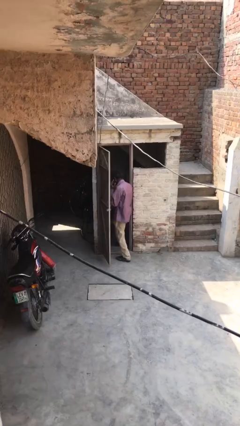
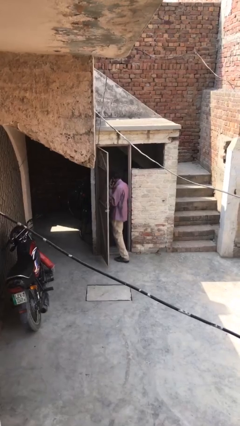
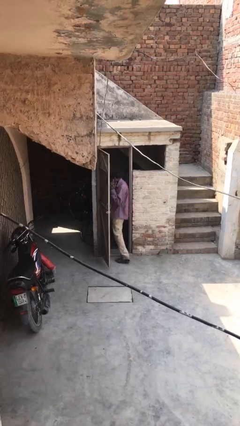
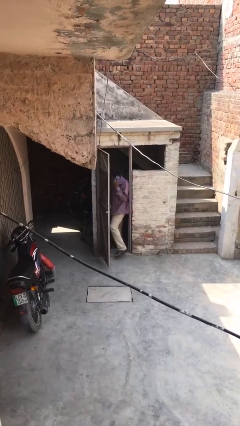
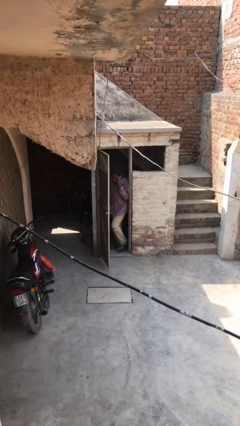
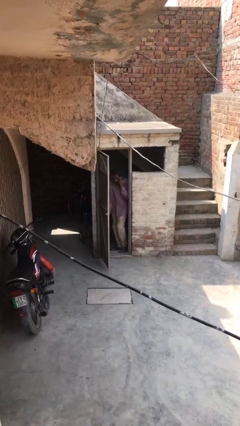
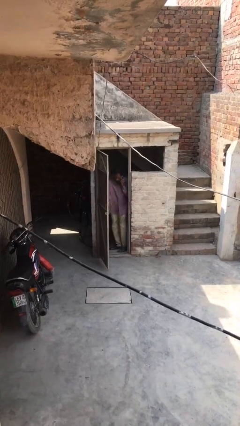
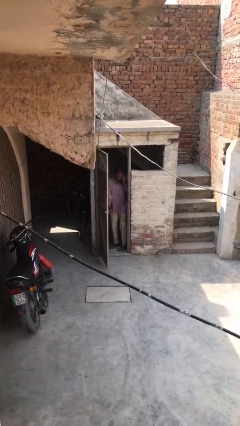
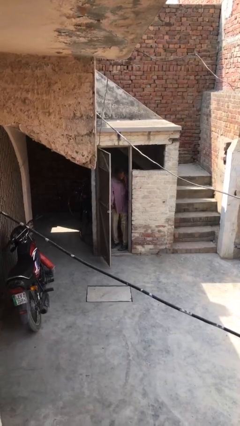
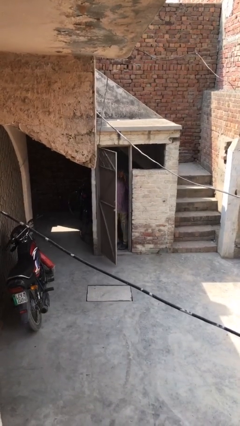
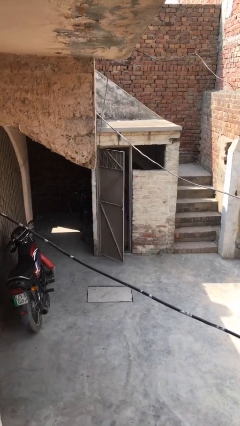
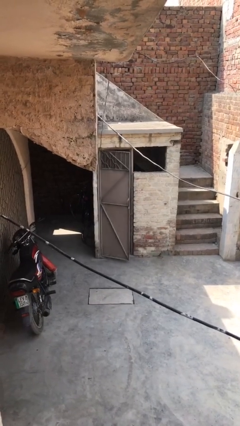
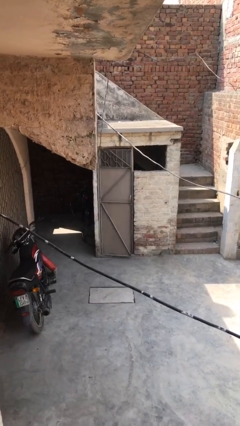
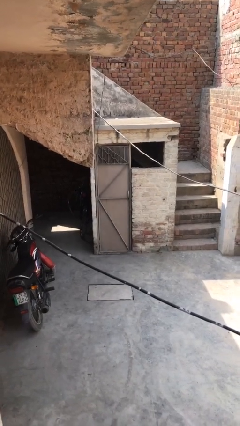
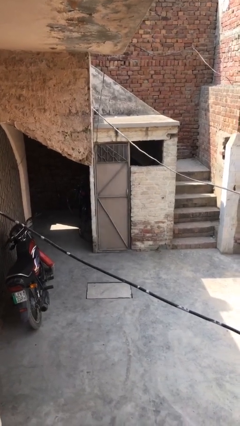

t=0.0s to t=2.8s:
person closes facility door

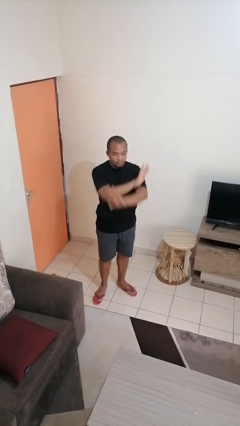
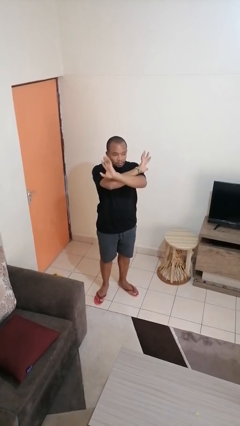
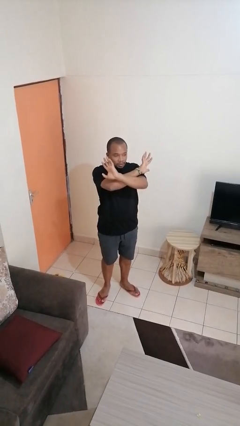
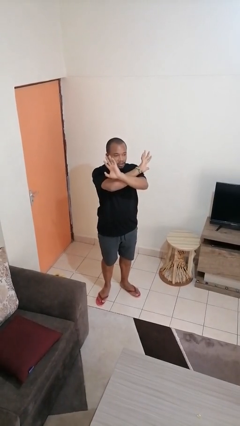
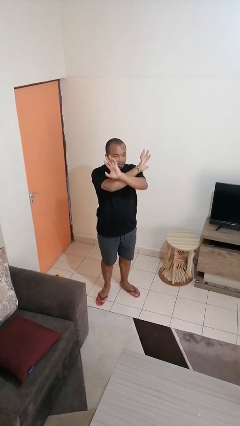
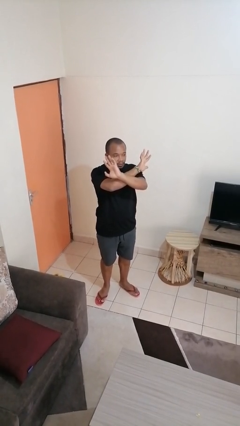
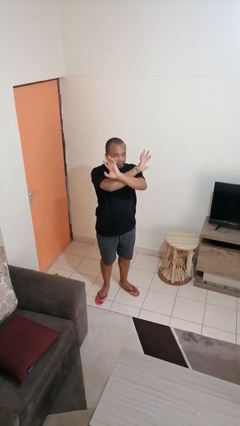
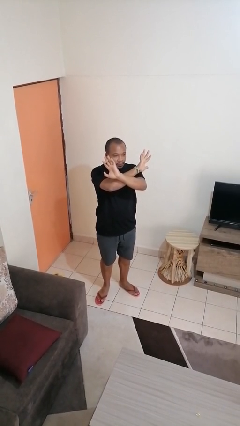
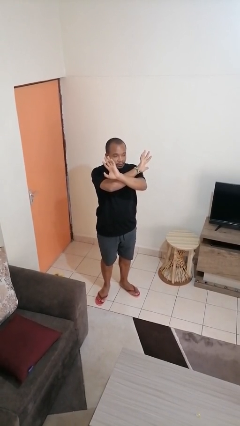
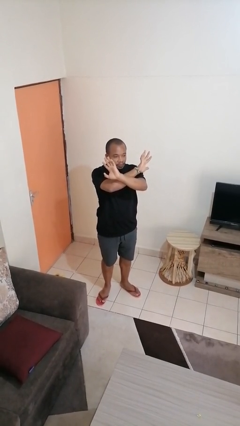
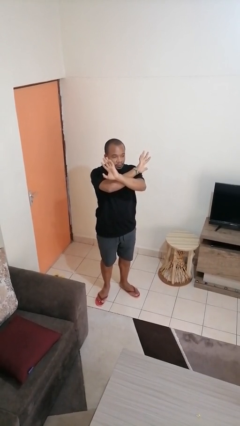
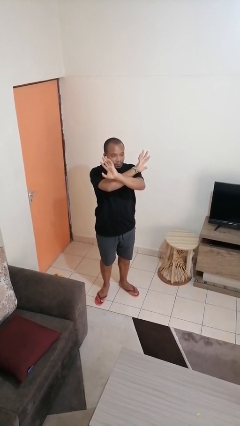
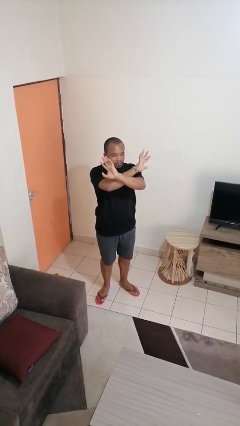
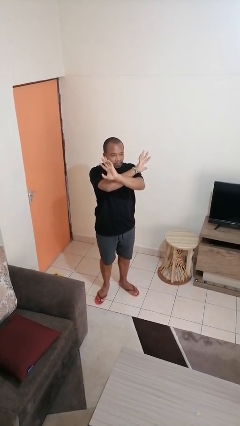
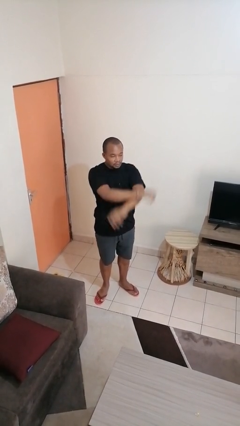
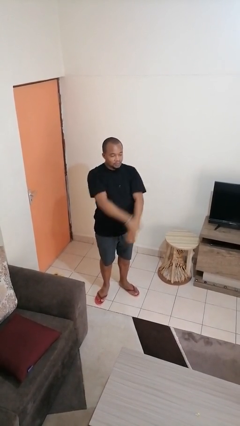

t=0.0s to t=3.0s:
person gestures arms x

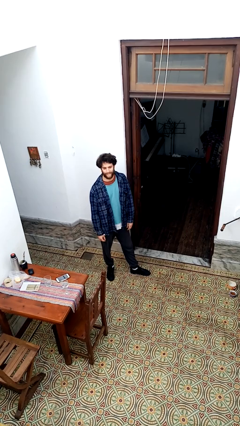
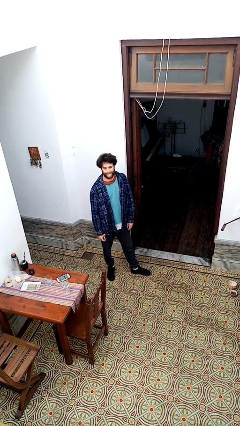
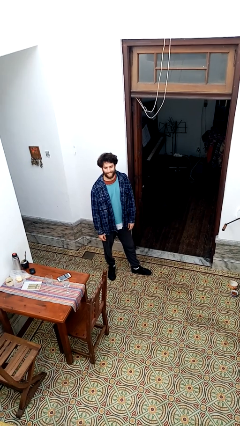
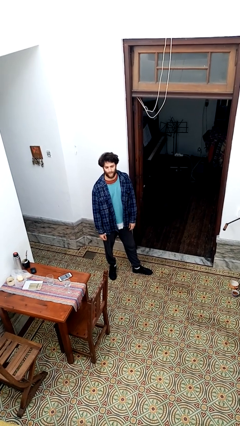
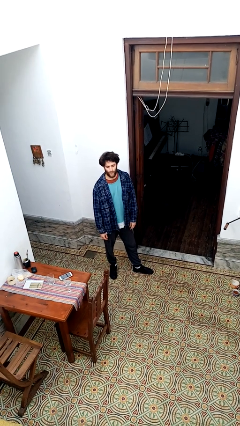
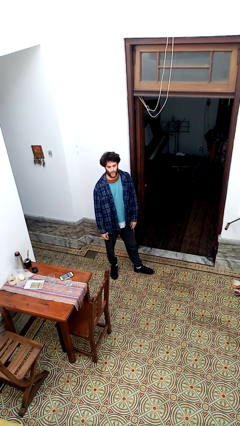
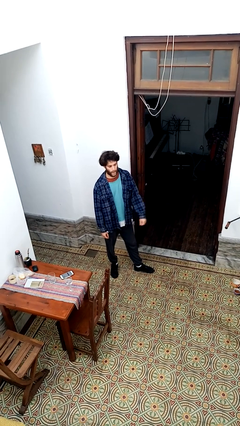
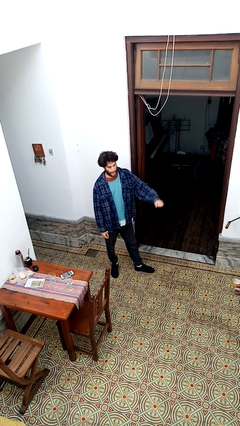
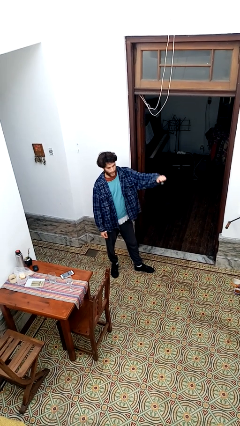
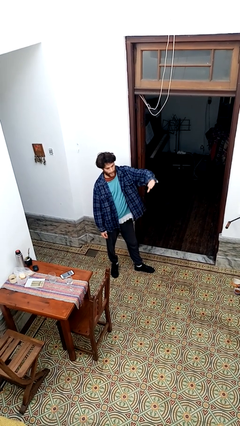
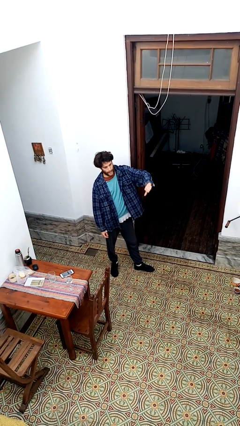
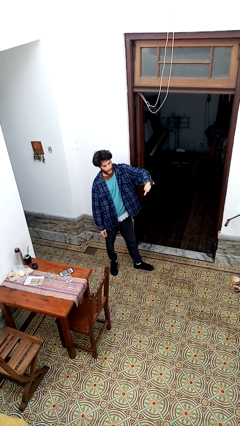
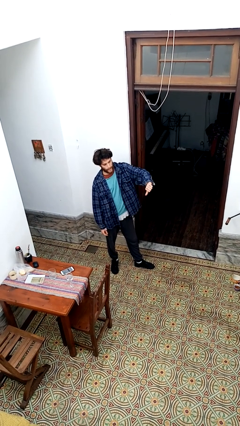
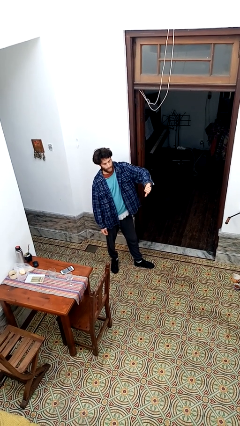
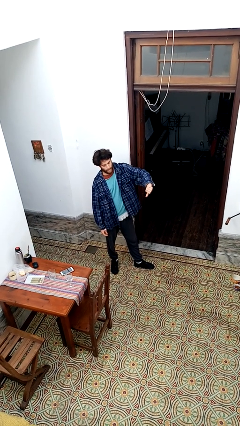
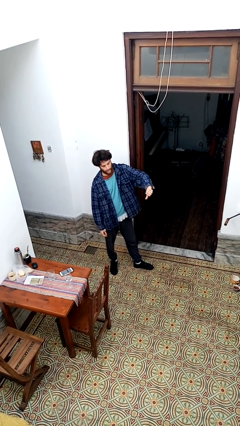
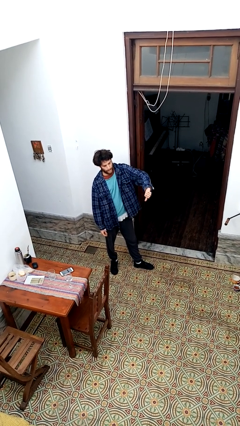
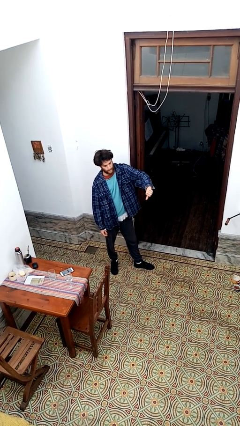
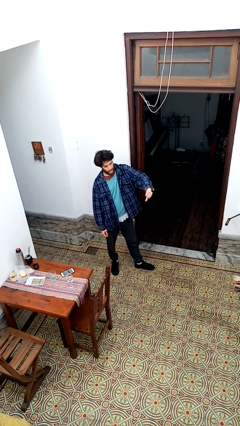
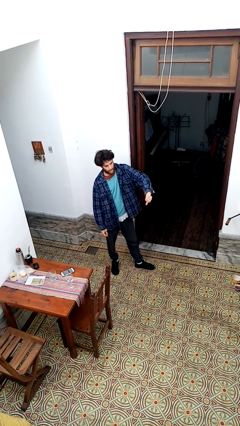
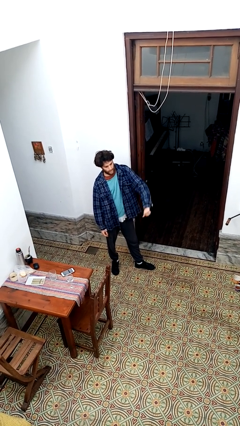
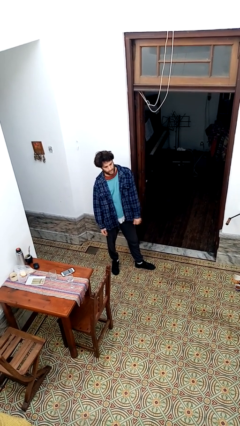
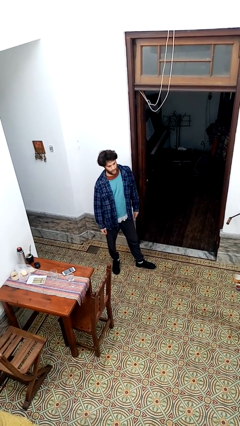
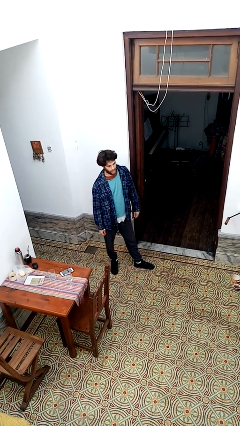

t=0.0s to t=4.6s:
person gestures thumbs down

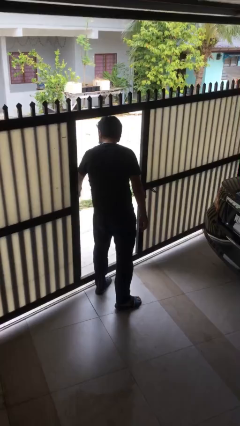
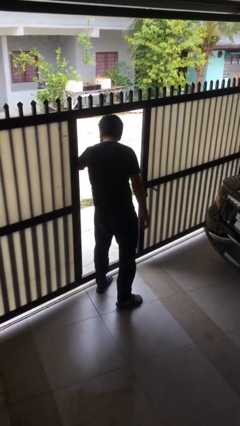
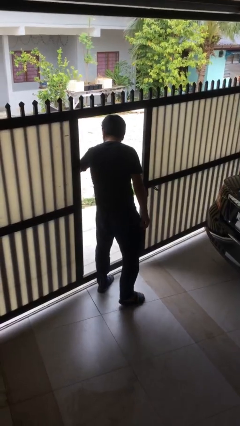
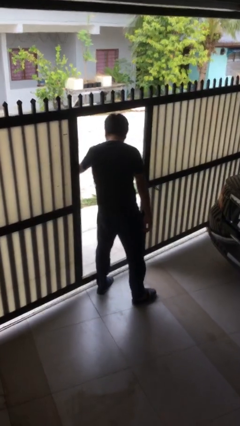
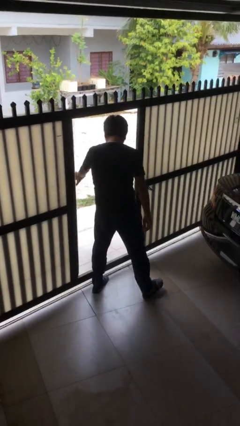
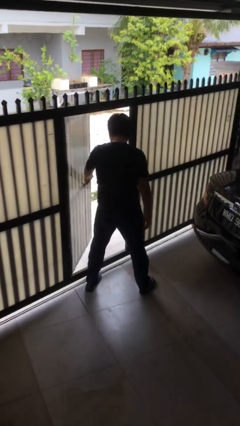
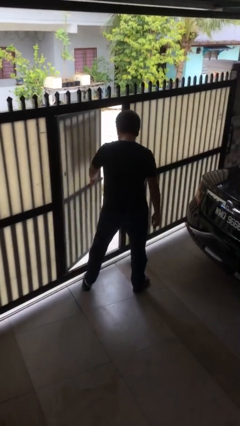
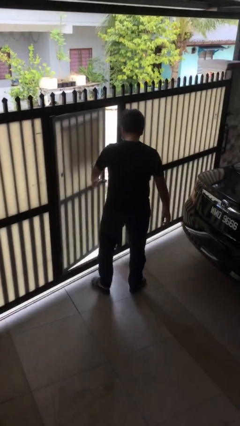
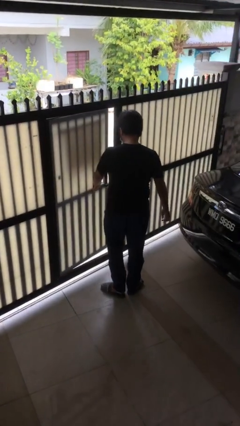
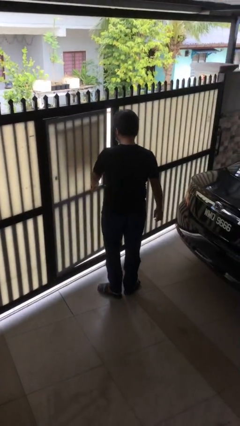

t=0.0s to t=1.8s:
person closes gate

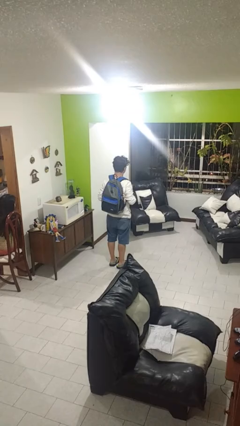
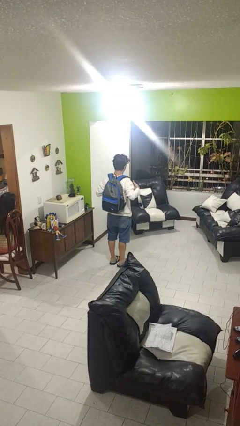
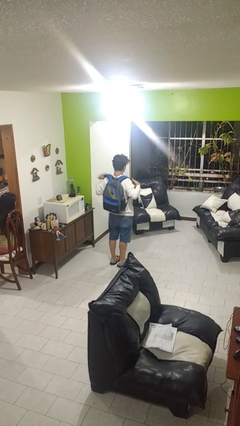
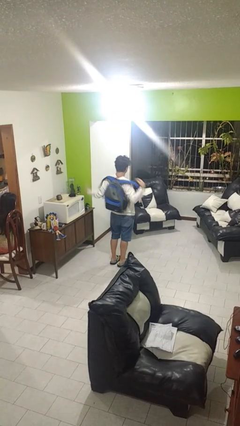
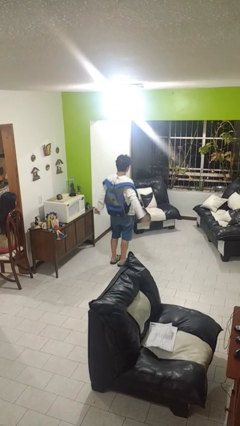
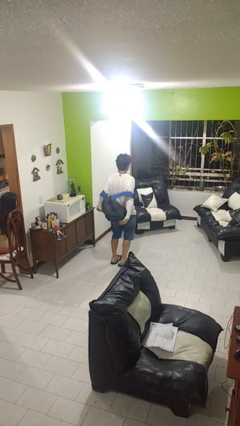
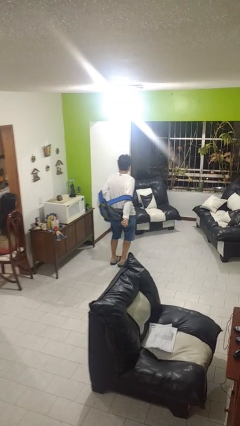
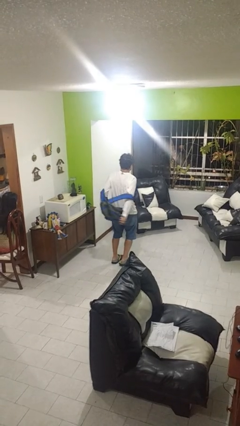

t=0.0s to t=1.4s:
person takes off backpack

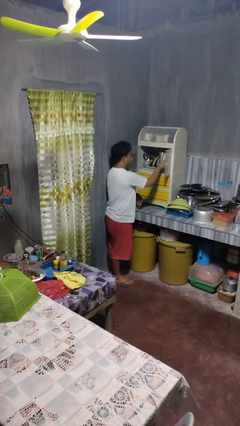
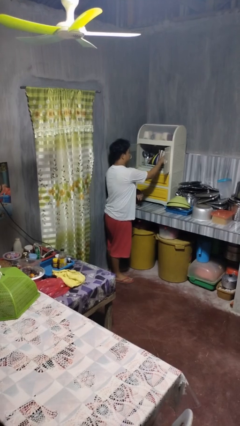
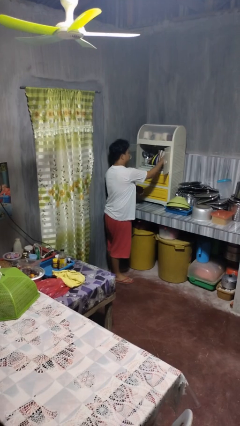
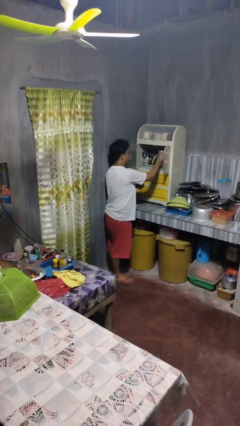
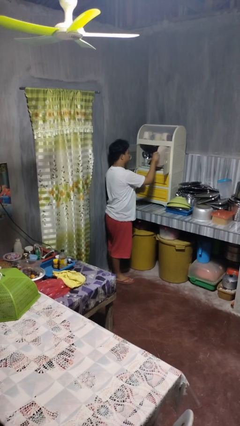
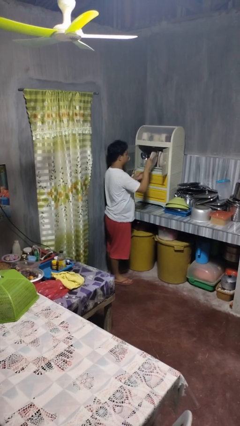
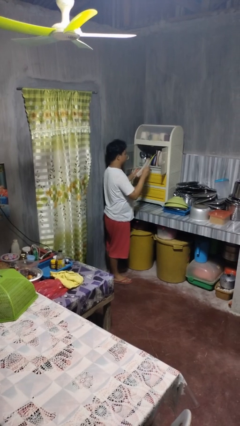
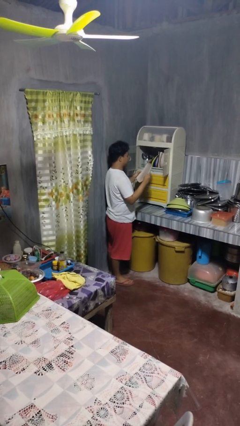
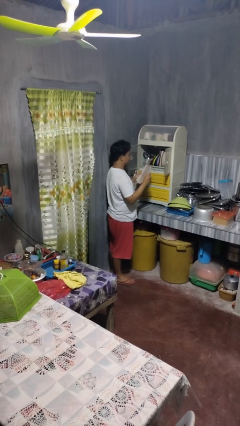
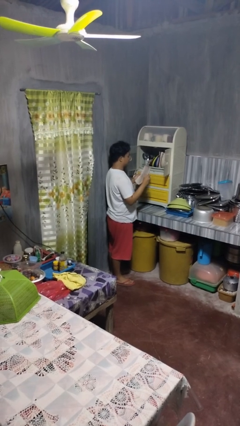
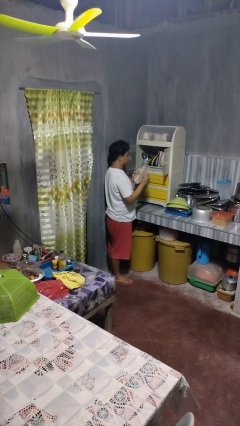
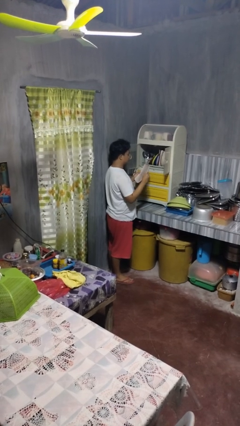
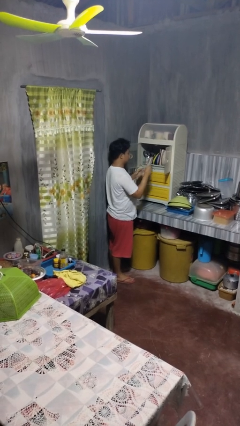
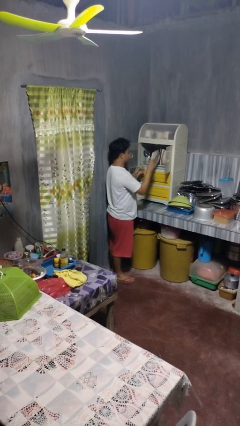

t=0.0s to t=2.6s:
person picks up object from cabinet

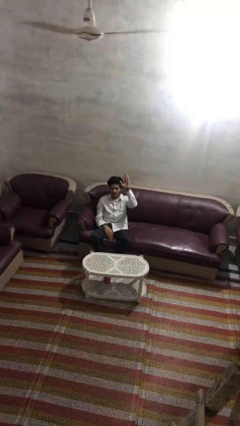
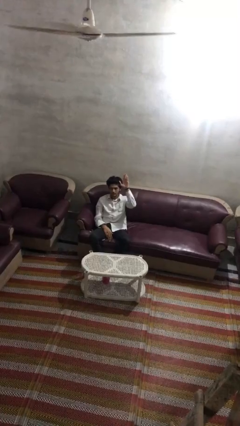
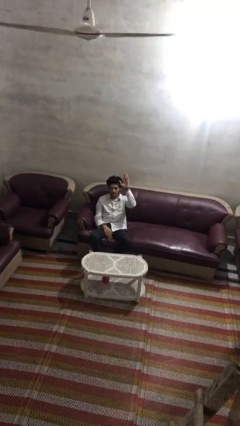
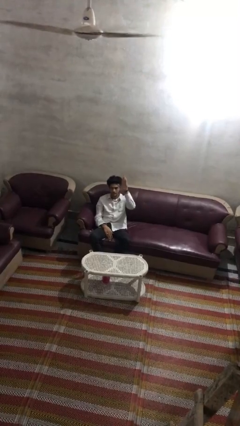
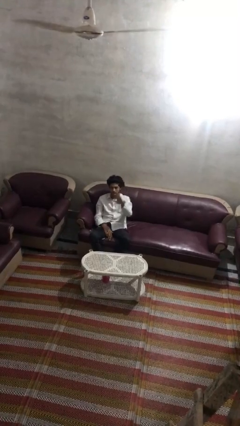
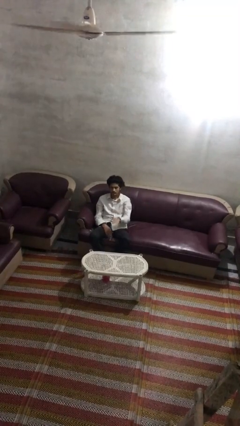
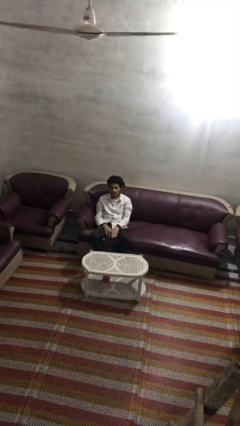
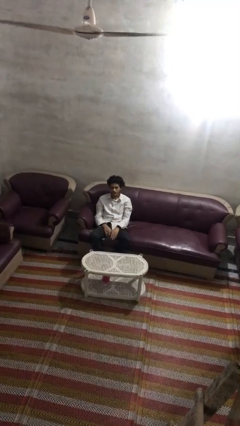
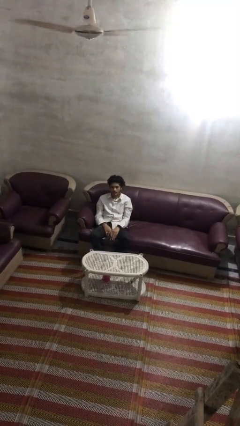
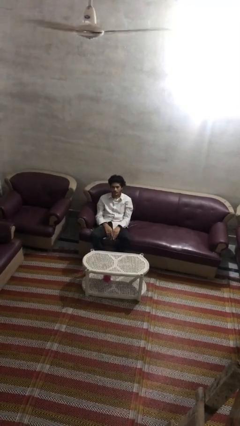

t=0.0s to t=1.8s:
person gestures lower hand
